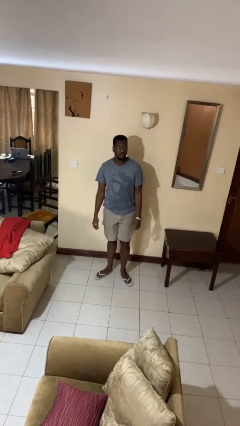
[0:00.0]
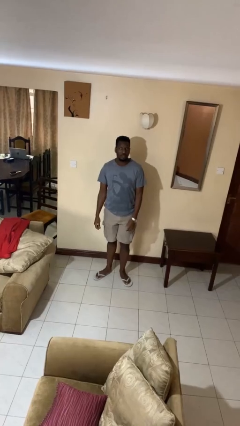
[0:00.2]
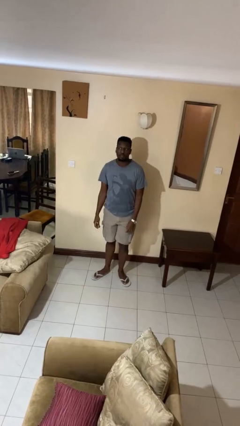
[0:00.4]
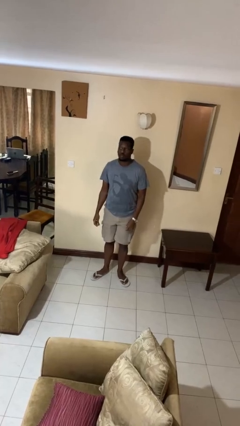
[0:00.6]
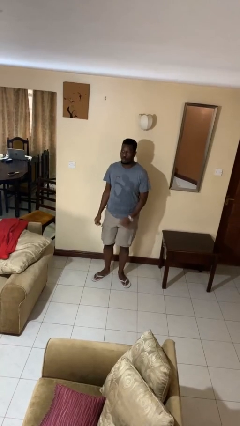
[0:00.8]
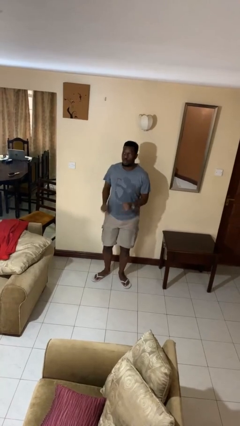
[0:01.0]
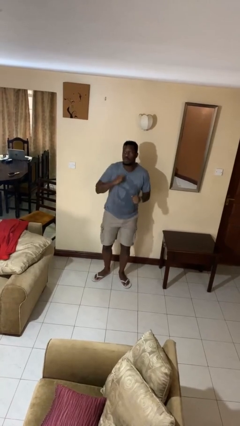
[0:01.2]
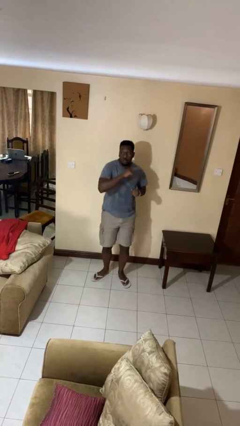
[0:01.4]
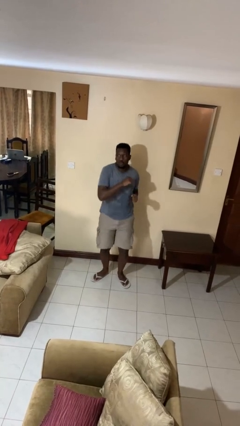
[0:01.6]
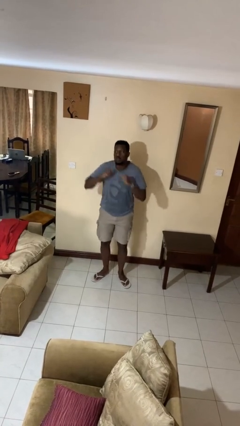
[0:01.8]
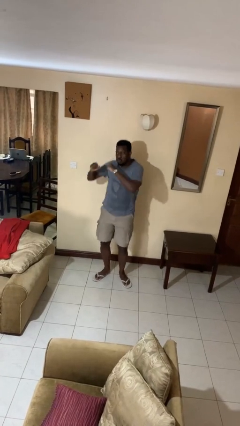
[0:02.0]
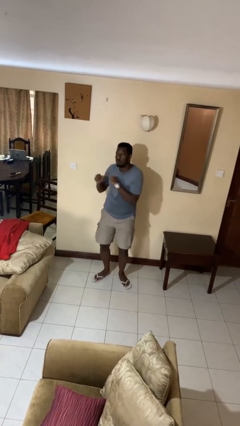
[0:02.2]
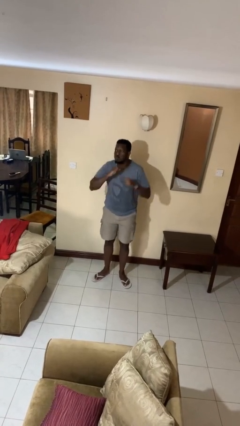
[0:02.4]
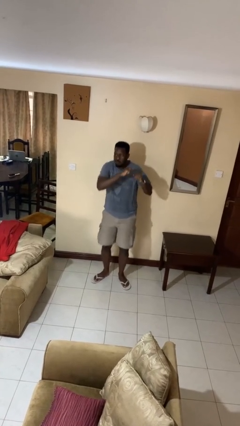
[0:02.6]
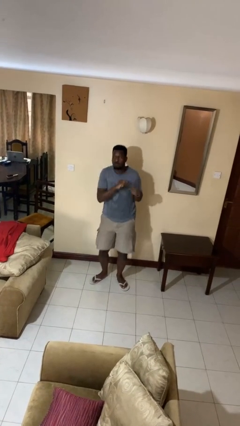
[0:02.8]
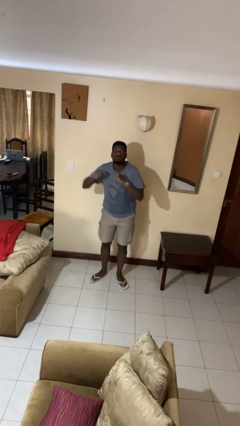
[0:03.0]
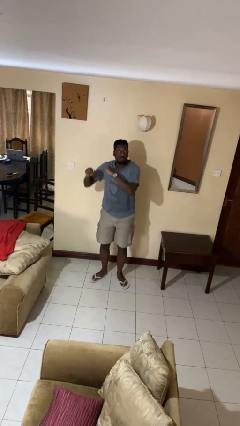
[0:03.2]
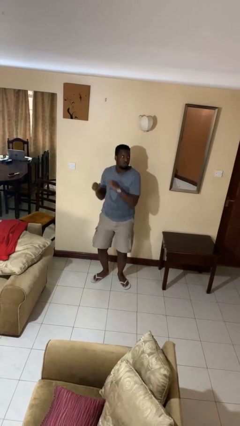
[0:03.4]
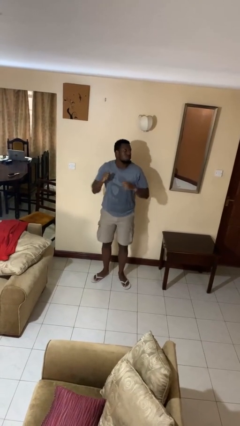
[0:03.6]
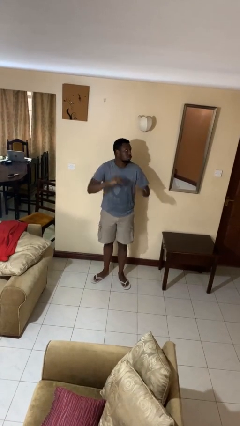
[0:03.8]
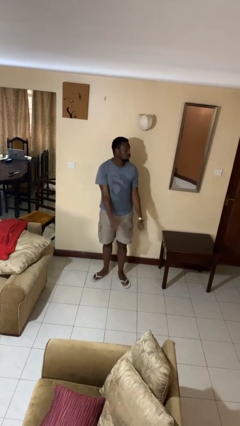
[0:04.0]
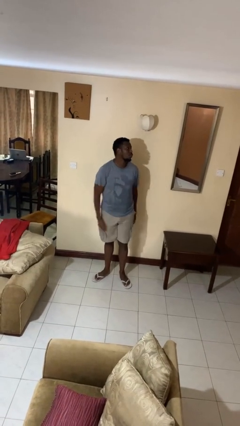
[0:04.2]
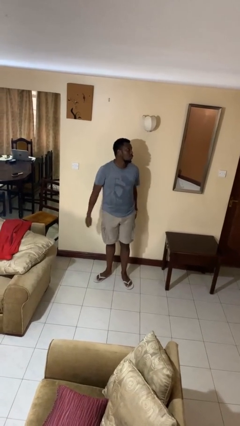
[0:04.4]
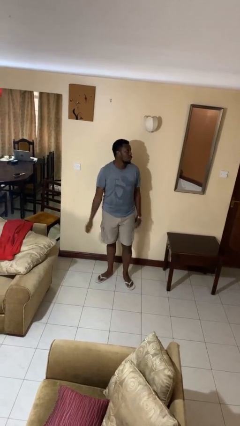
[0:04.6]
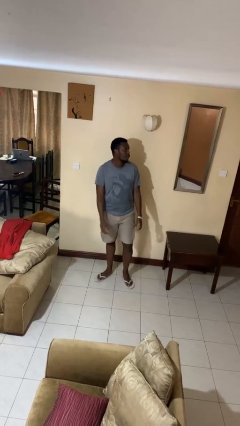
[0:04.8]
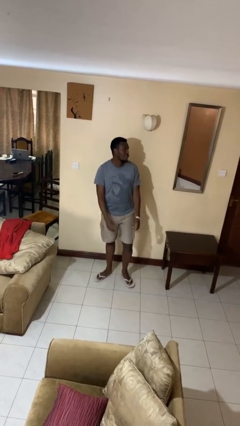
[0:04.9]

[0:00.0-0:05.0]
person dances in place

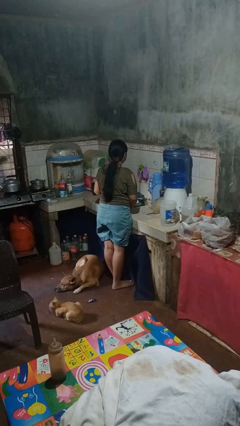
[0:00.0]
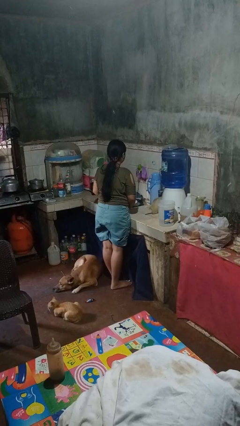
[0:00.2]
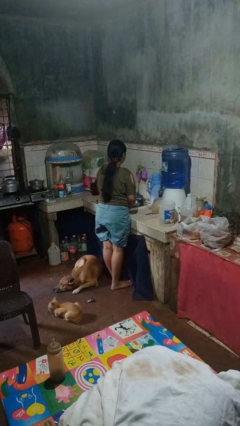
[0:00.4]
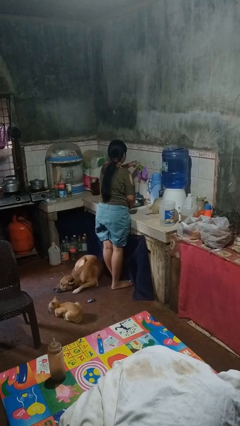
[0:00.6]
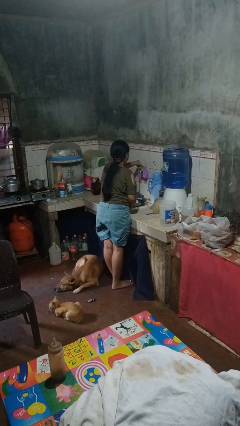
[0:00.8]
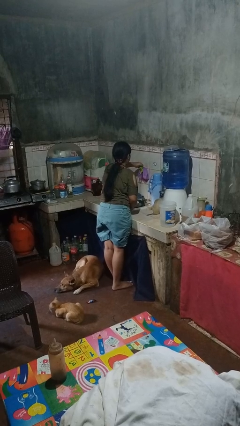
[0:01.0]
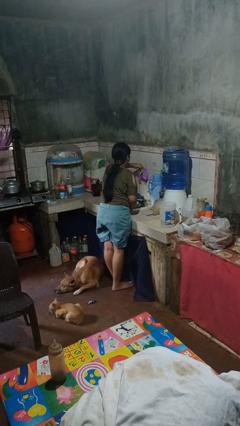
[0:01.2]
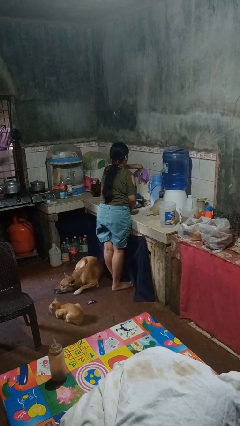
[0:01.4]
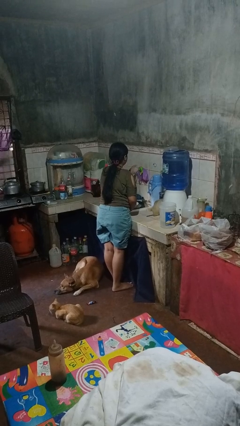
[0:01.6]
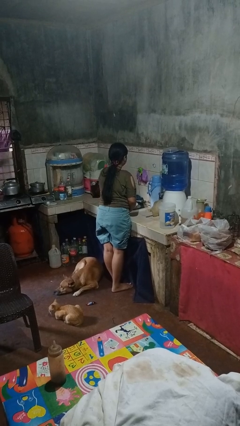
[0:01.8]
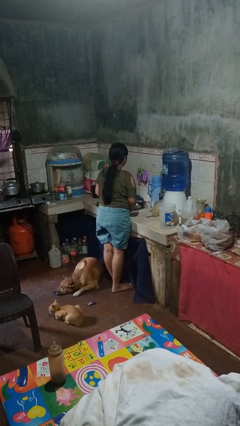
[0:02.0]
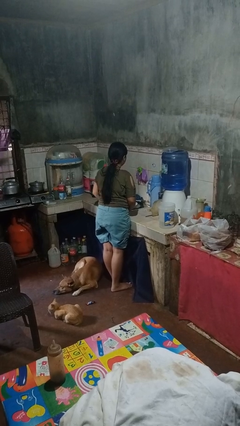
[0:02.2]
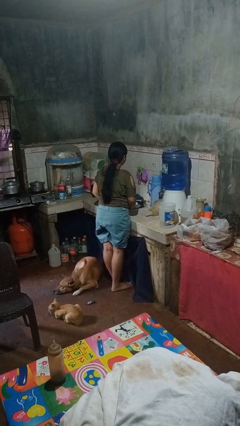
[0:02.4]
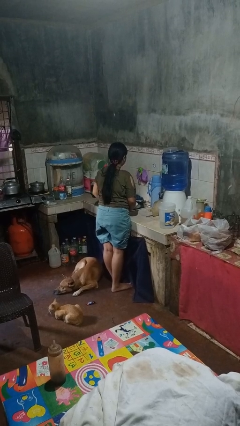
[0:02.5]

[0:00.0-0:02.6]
person turns off faucet

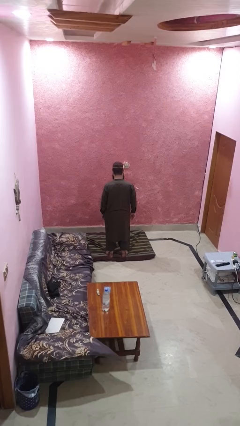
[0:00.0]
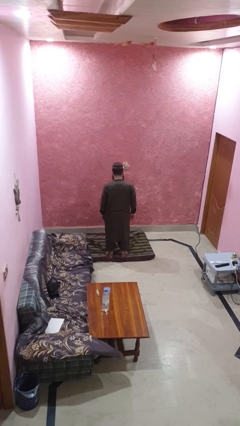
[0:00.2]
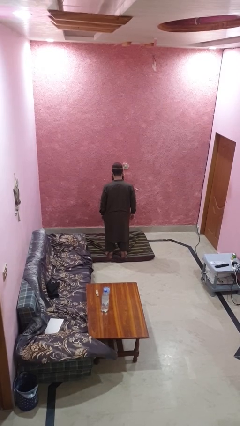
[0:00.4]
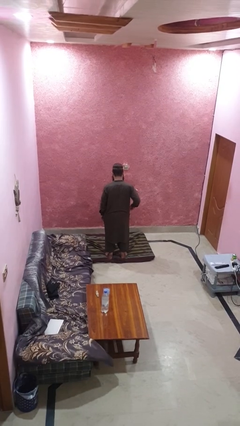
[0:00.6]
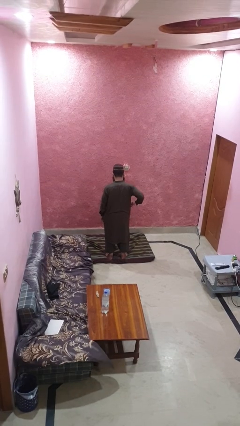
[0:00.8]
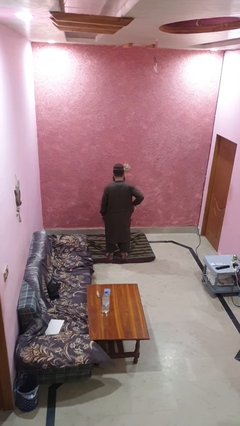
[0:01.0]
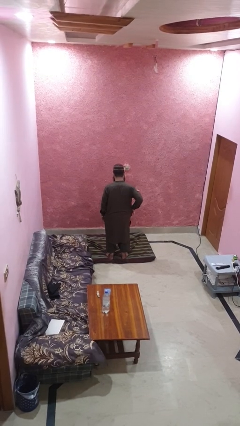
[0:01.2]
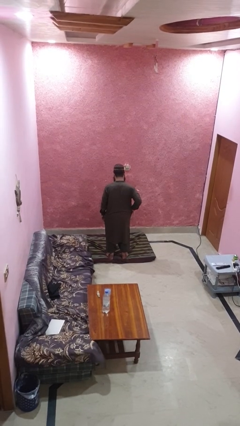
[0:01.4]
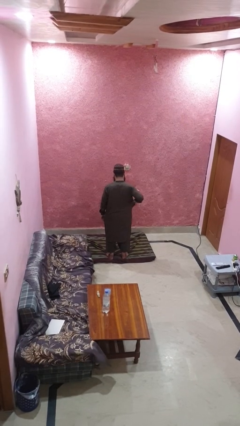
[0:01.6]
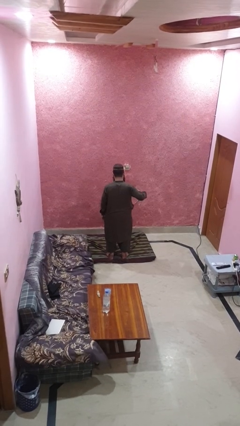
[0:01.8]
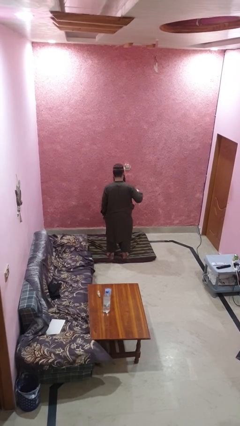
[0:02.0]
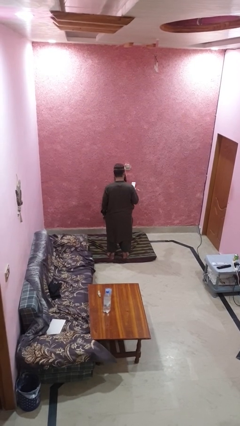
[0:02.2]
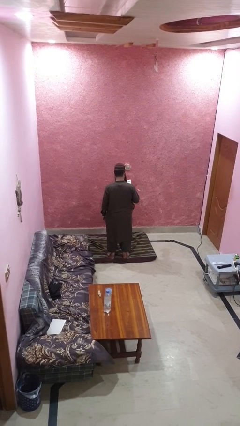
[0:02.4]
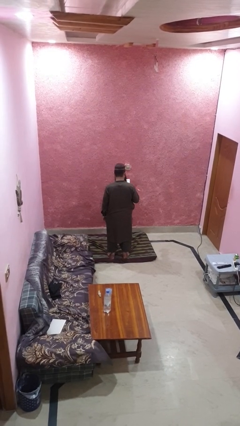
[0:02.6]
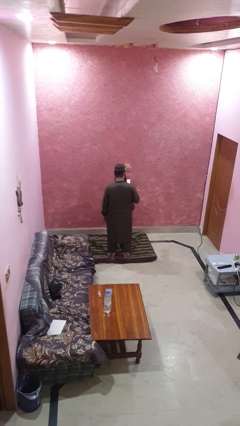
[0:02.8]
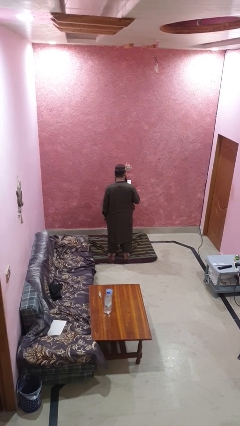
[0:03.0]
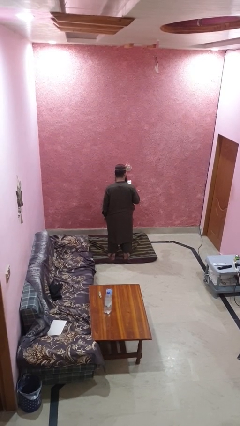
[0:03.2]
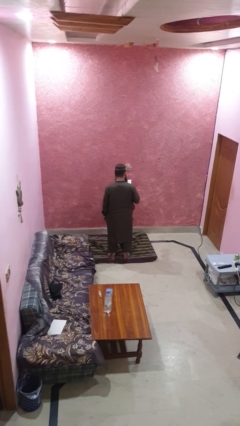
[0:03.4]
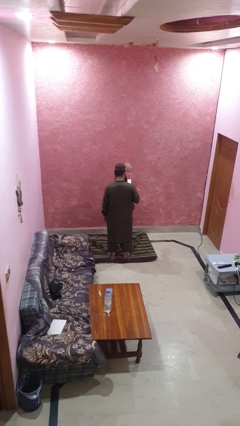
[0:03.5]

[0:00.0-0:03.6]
person takes phone from pocket

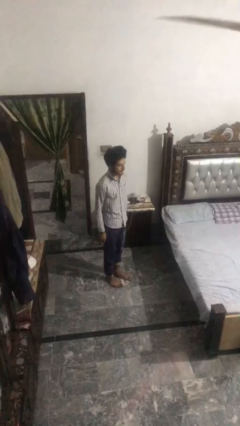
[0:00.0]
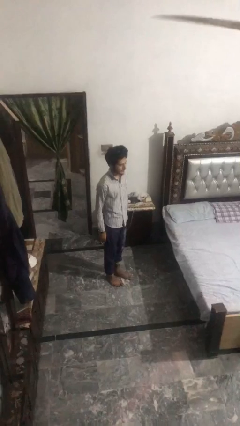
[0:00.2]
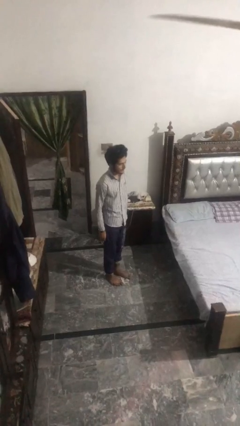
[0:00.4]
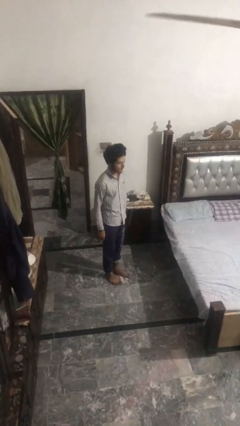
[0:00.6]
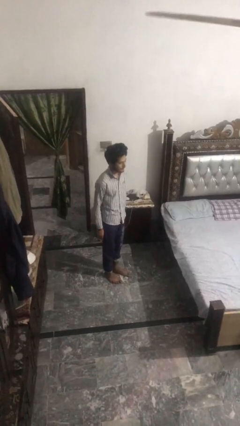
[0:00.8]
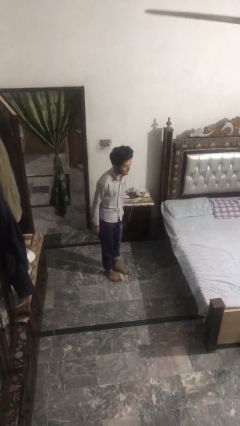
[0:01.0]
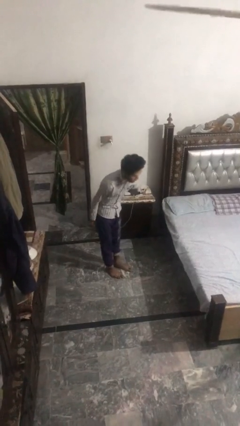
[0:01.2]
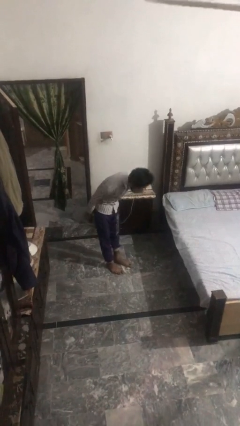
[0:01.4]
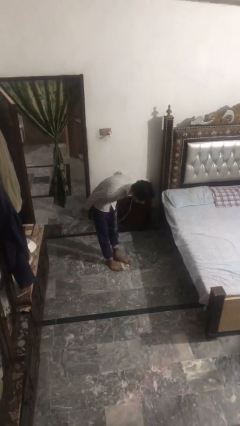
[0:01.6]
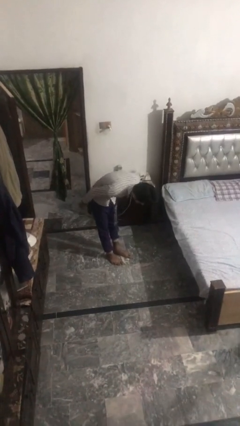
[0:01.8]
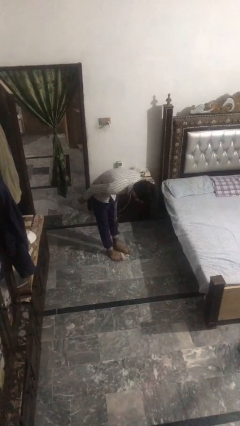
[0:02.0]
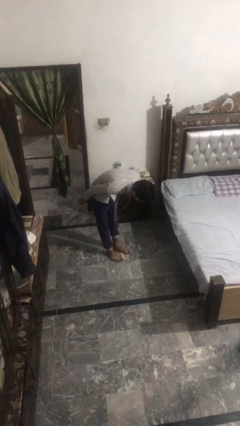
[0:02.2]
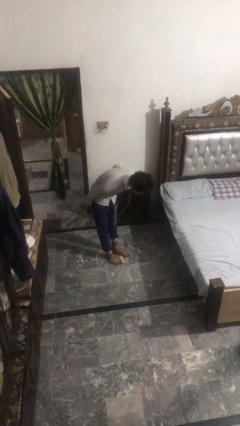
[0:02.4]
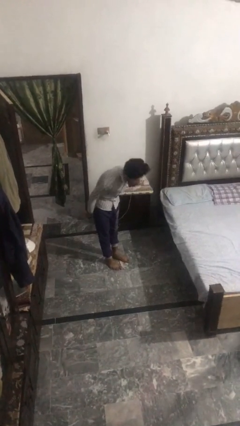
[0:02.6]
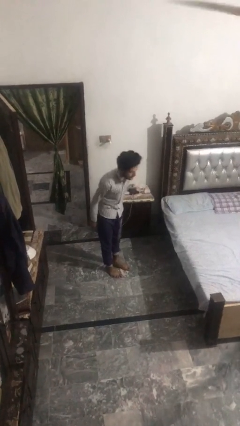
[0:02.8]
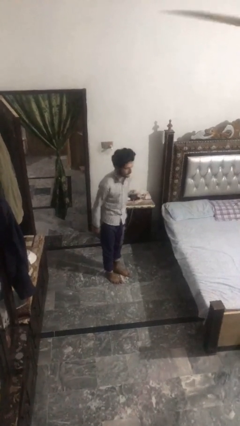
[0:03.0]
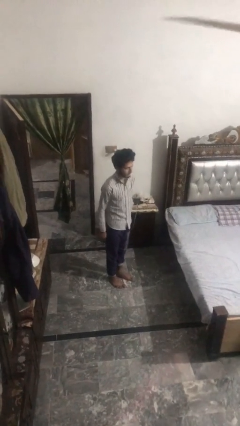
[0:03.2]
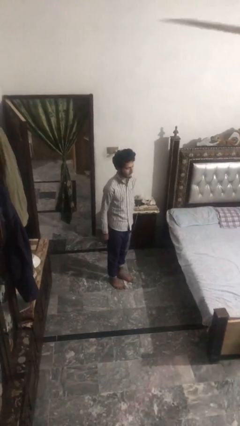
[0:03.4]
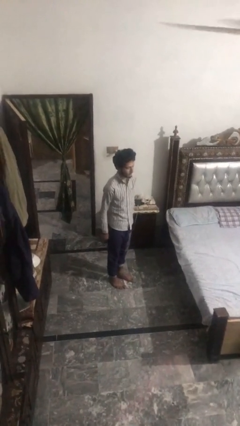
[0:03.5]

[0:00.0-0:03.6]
person bows

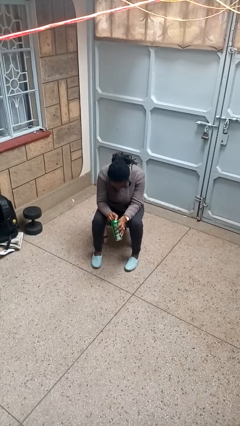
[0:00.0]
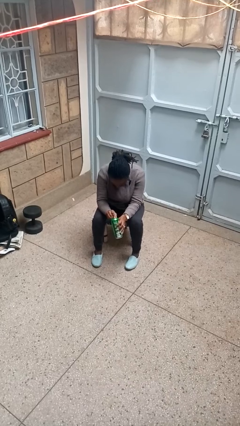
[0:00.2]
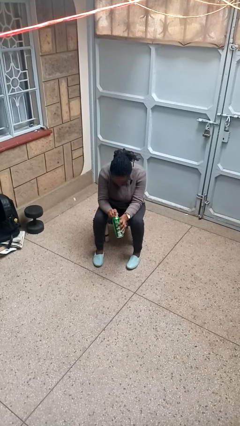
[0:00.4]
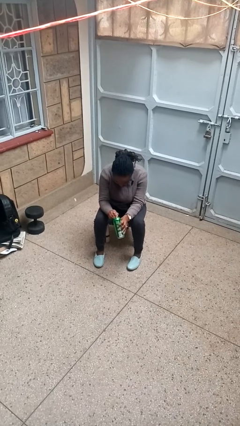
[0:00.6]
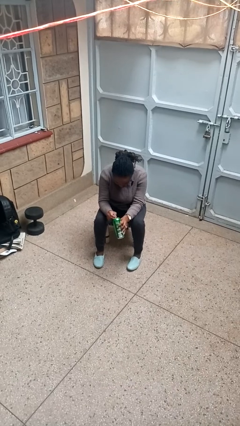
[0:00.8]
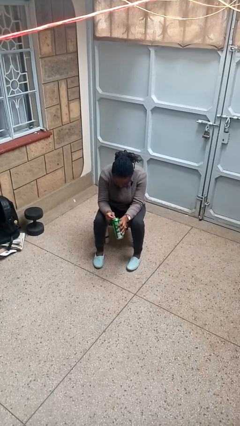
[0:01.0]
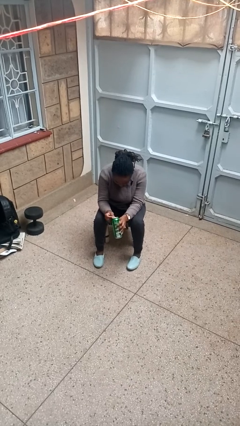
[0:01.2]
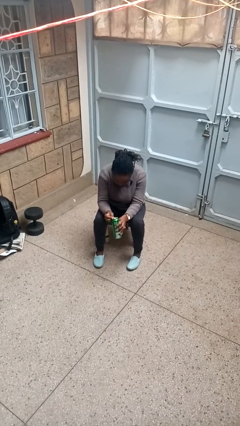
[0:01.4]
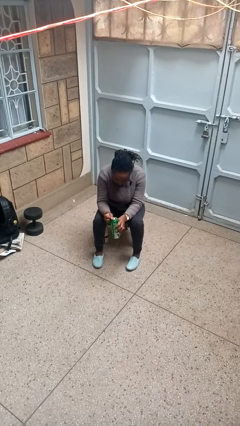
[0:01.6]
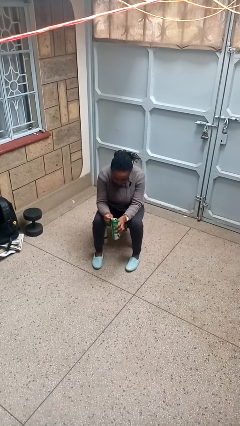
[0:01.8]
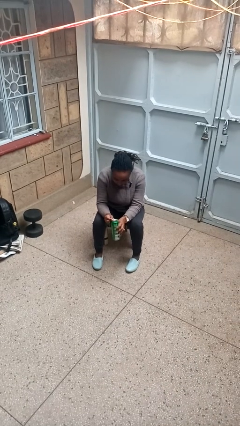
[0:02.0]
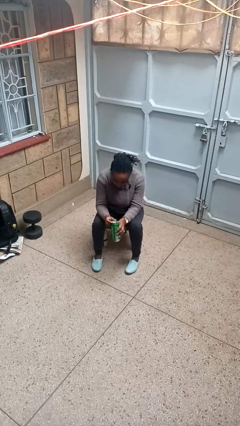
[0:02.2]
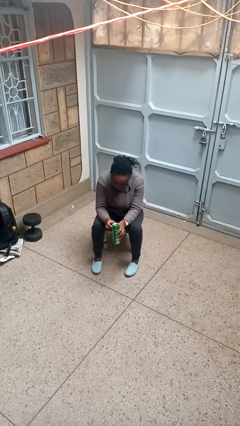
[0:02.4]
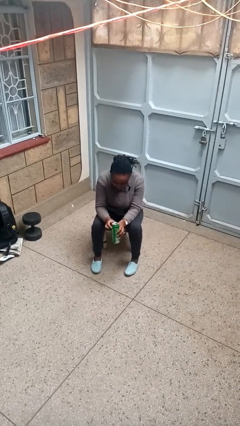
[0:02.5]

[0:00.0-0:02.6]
person opens beverage can
